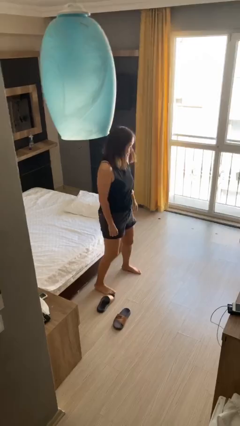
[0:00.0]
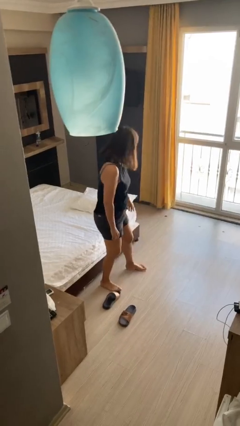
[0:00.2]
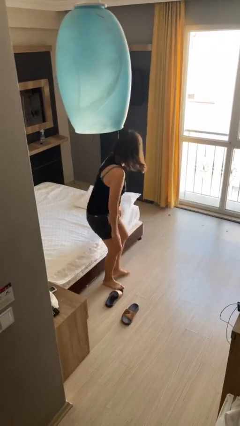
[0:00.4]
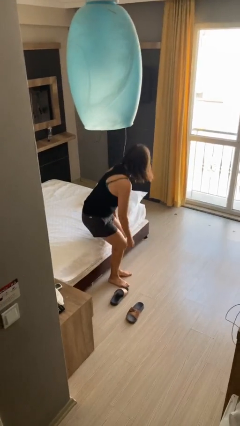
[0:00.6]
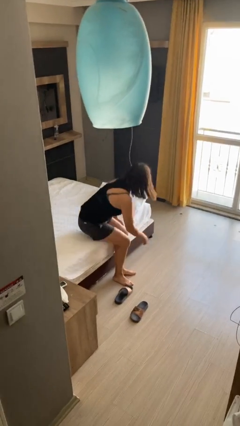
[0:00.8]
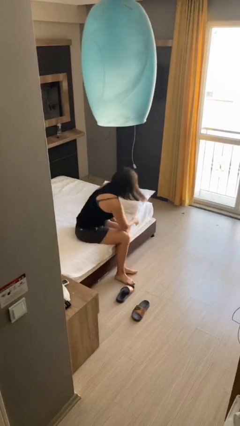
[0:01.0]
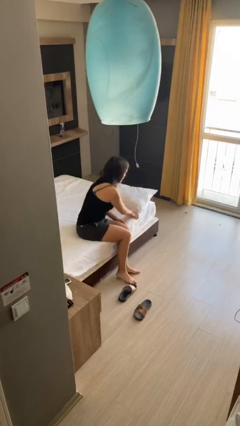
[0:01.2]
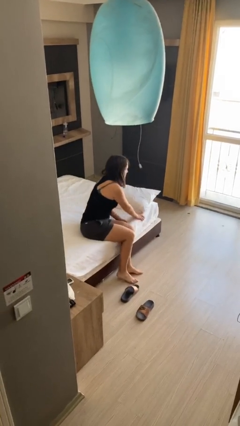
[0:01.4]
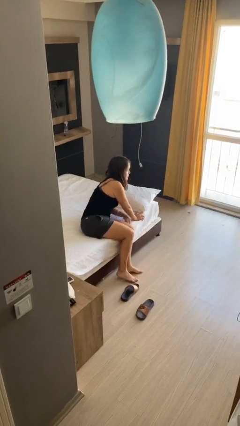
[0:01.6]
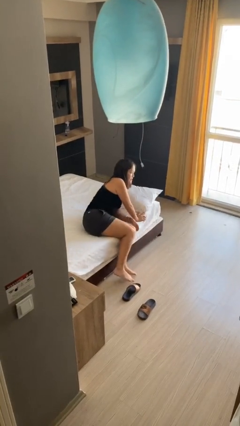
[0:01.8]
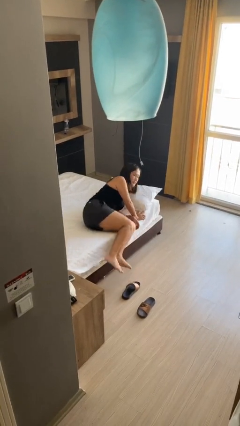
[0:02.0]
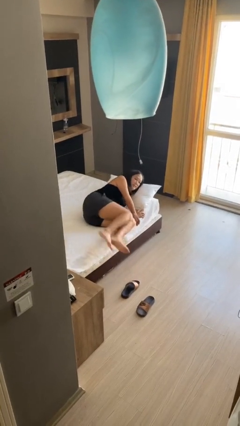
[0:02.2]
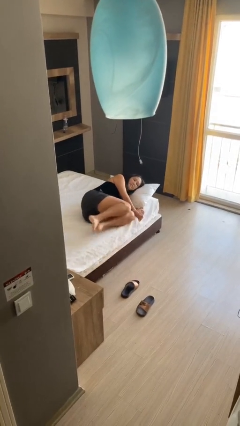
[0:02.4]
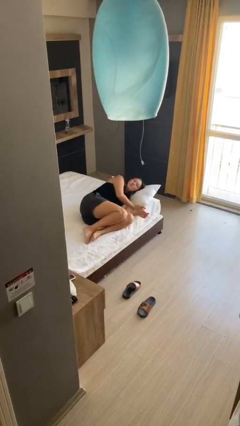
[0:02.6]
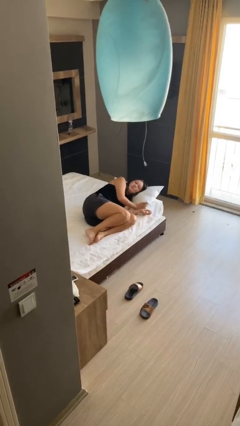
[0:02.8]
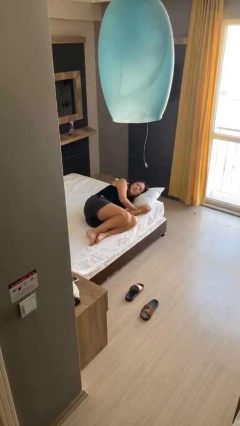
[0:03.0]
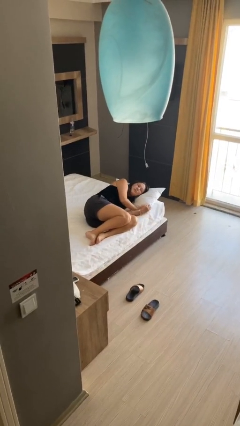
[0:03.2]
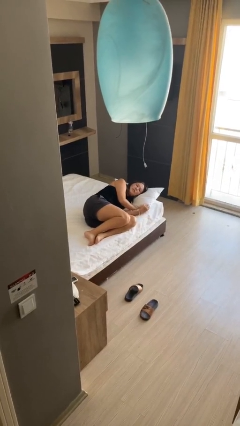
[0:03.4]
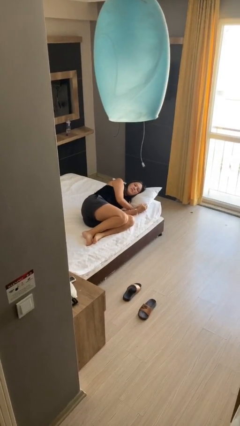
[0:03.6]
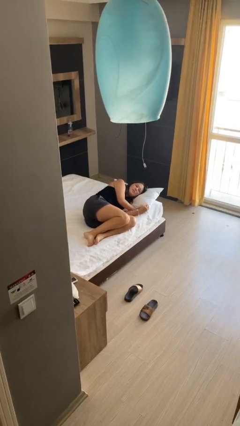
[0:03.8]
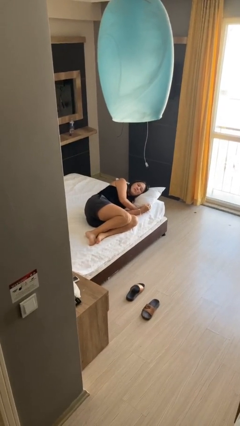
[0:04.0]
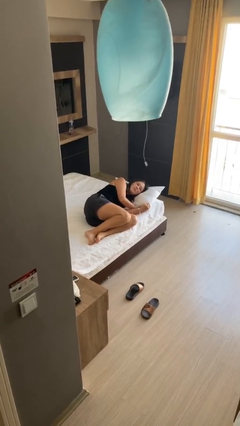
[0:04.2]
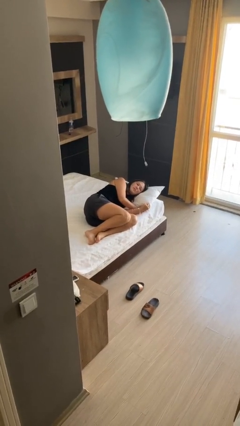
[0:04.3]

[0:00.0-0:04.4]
person lies down on bed

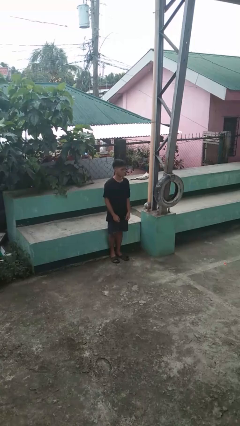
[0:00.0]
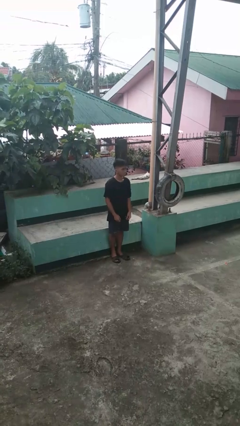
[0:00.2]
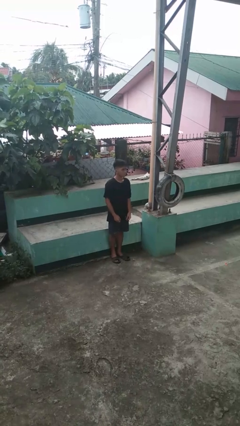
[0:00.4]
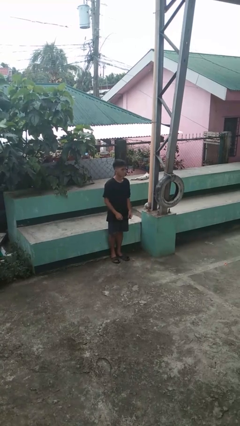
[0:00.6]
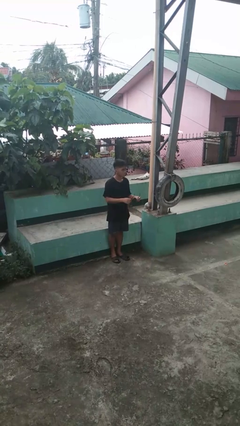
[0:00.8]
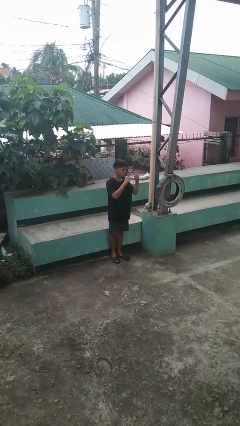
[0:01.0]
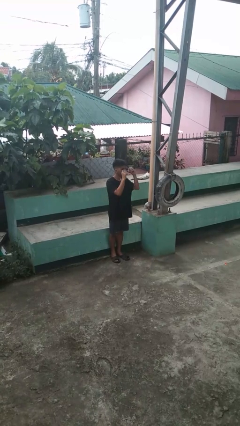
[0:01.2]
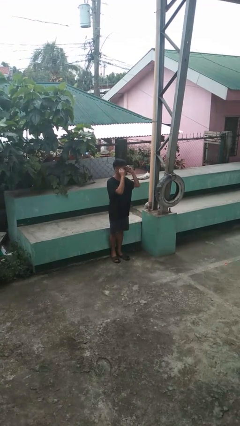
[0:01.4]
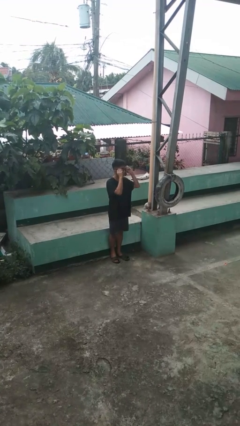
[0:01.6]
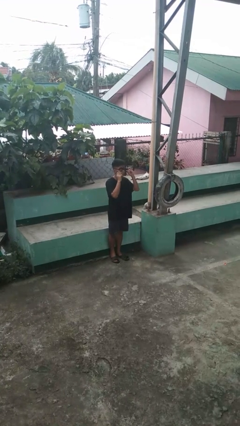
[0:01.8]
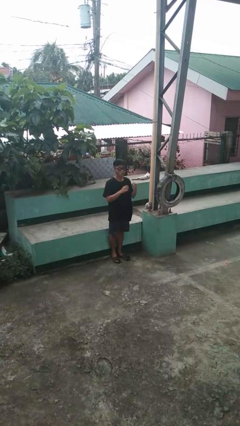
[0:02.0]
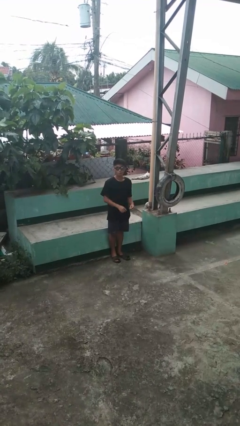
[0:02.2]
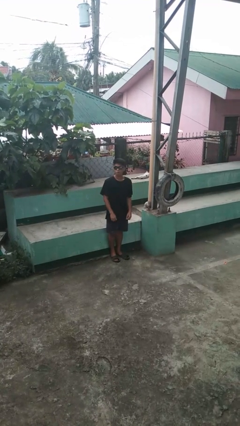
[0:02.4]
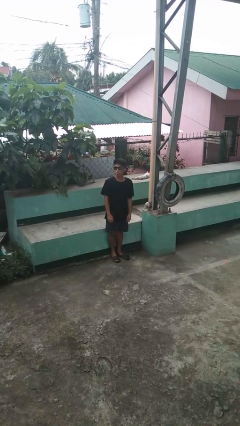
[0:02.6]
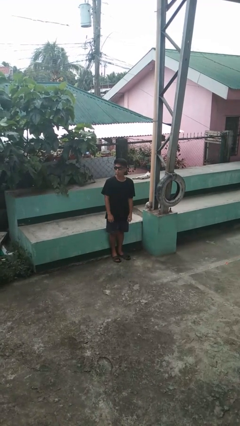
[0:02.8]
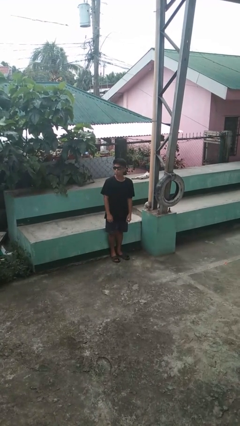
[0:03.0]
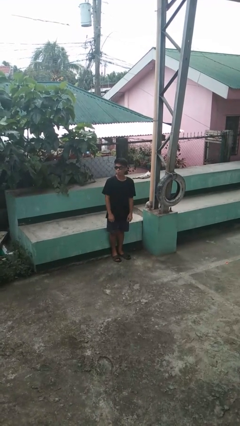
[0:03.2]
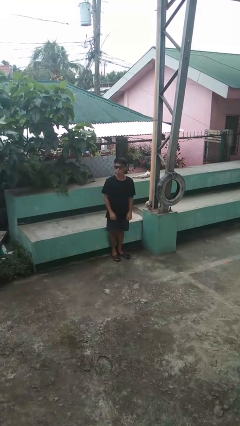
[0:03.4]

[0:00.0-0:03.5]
person puts on sunglasses

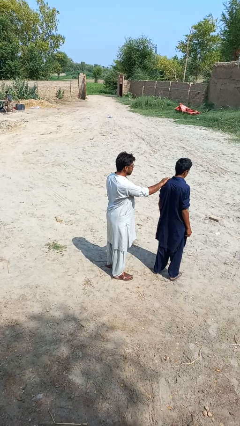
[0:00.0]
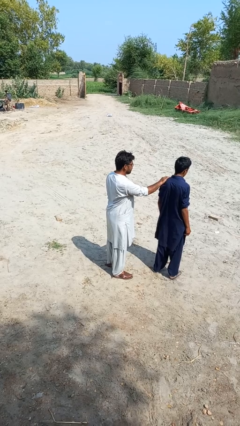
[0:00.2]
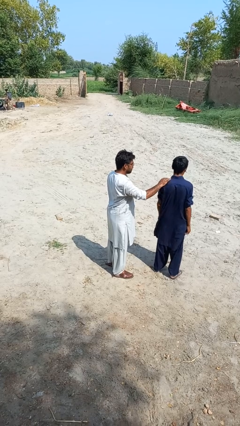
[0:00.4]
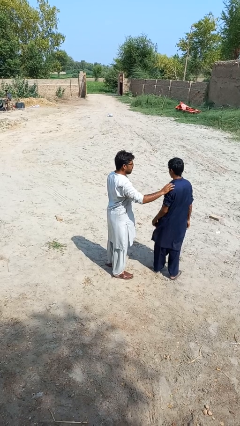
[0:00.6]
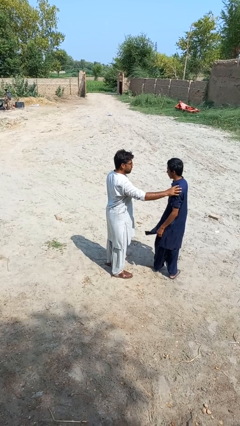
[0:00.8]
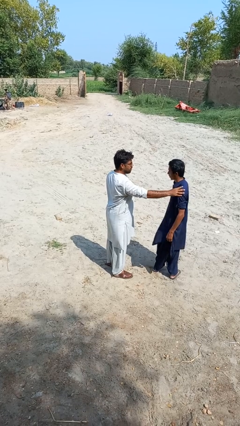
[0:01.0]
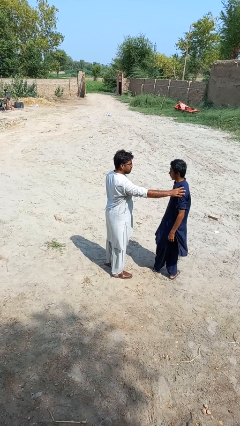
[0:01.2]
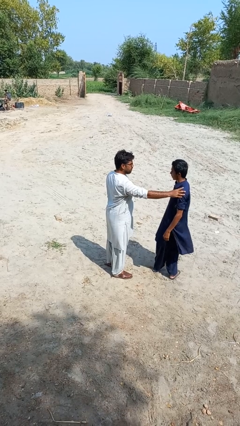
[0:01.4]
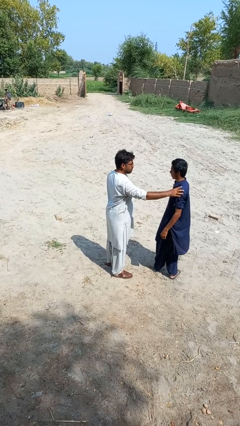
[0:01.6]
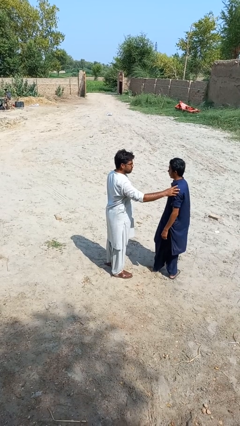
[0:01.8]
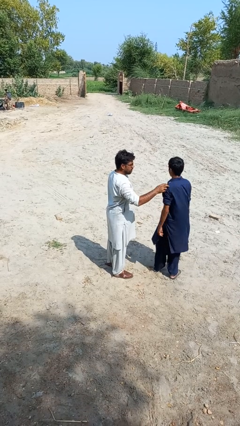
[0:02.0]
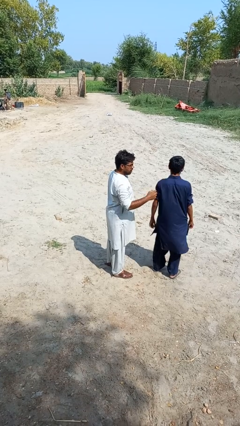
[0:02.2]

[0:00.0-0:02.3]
person spins person around

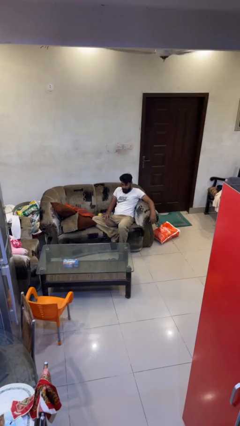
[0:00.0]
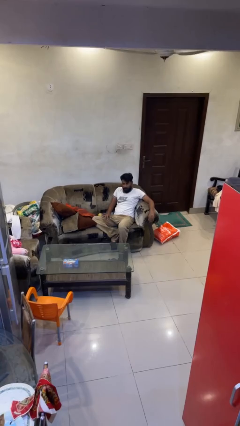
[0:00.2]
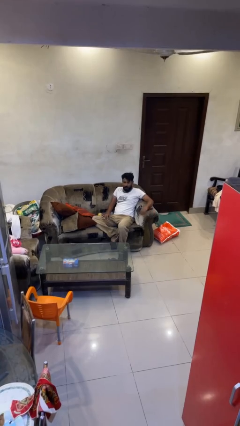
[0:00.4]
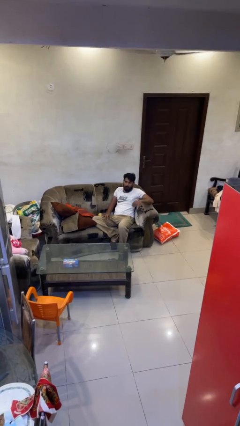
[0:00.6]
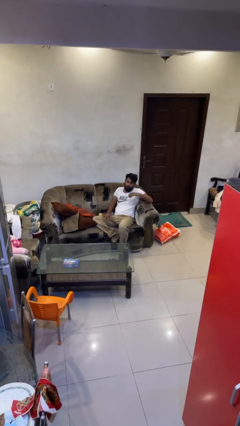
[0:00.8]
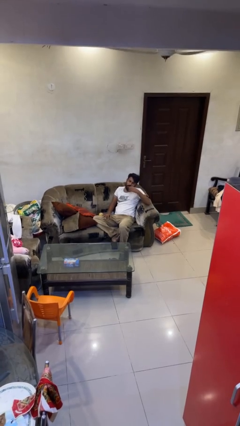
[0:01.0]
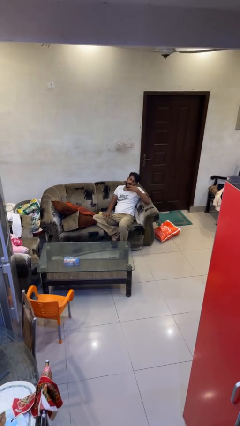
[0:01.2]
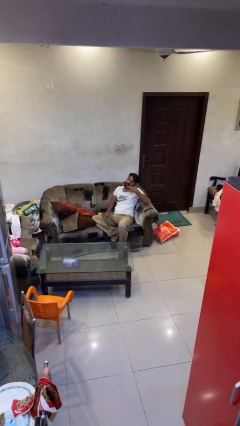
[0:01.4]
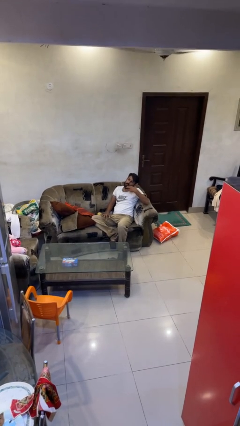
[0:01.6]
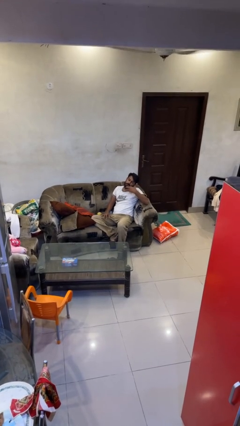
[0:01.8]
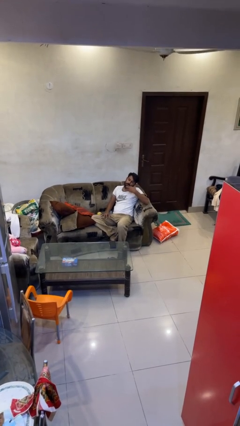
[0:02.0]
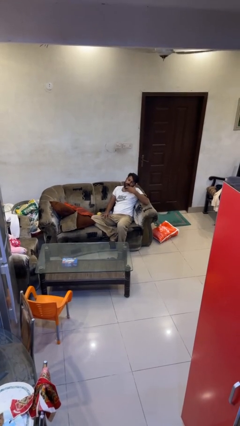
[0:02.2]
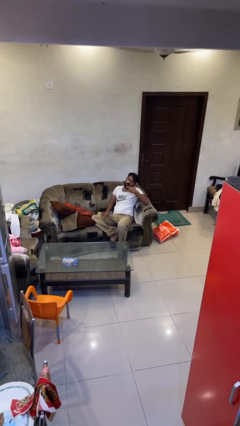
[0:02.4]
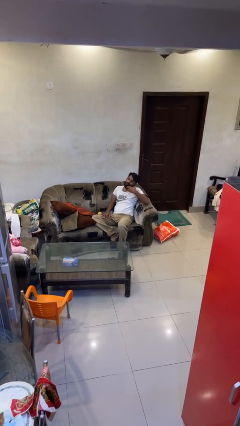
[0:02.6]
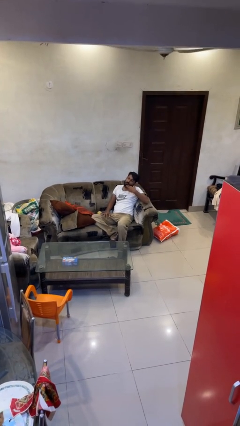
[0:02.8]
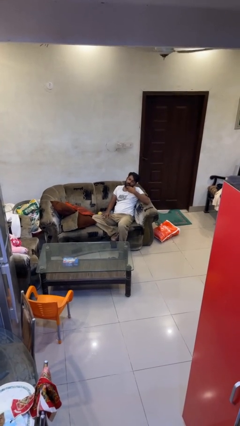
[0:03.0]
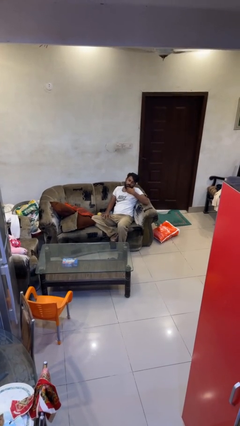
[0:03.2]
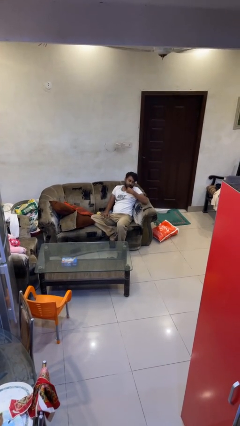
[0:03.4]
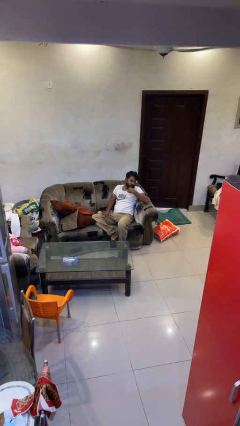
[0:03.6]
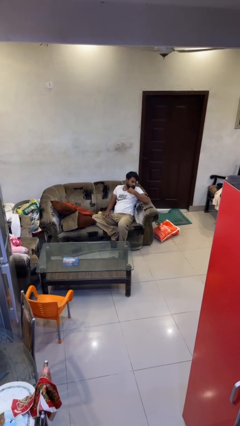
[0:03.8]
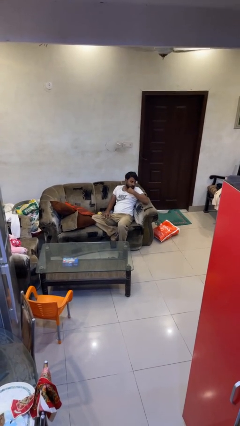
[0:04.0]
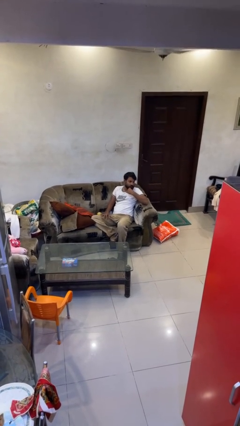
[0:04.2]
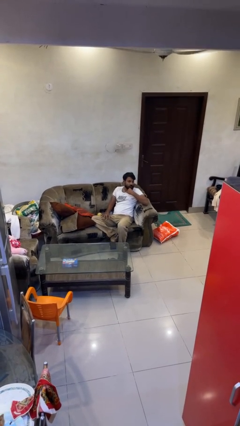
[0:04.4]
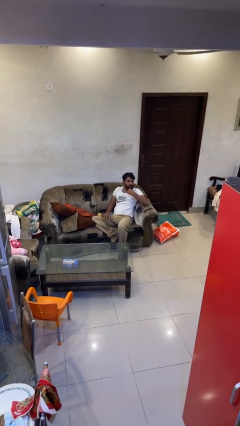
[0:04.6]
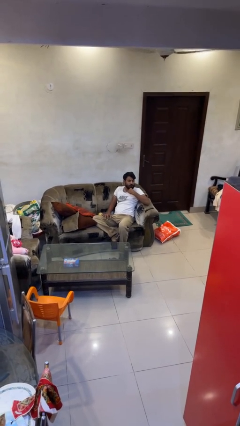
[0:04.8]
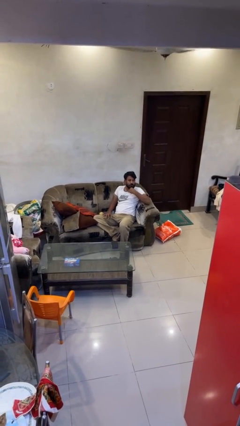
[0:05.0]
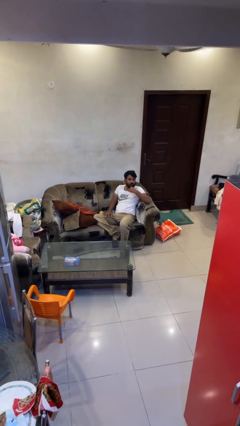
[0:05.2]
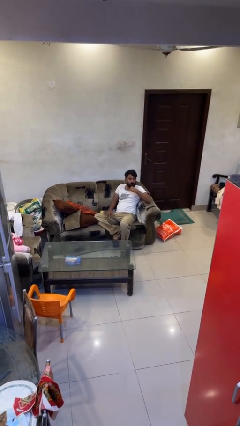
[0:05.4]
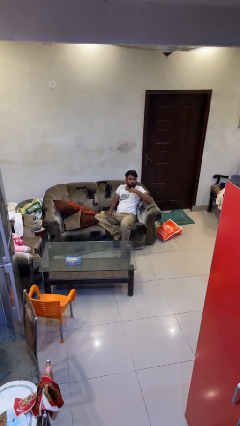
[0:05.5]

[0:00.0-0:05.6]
person strokes chin

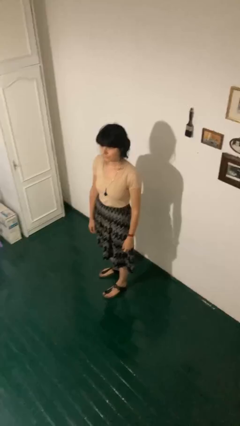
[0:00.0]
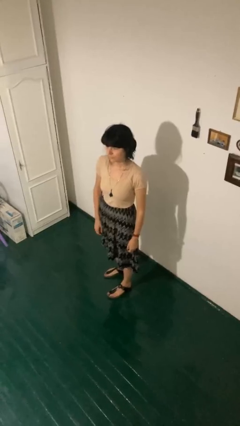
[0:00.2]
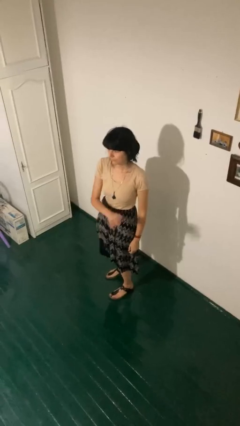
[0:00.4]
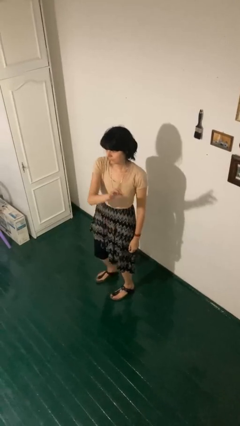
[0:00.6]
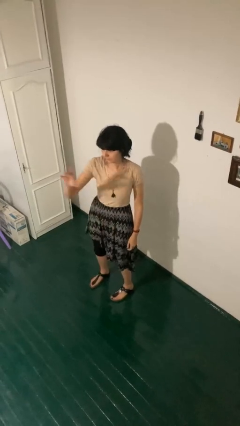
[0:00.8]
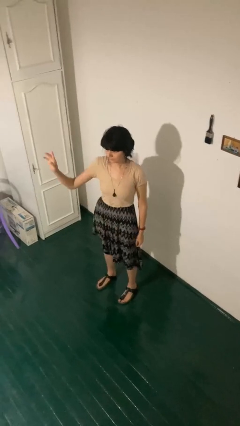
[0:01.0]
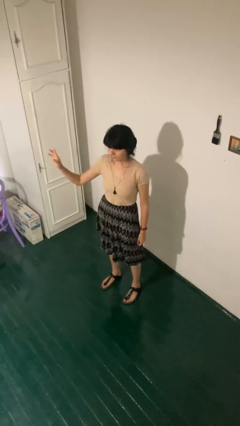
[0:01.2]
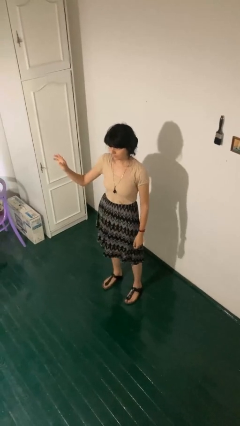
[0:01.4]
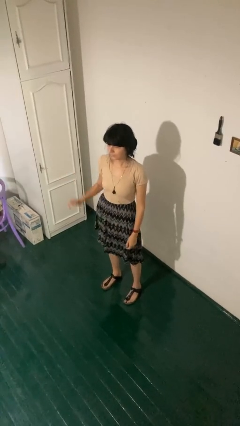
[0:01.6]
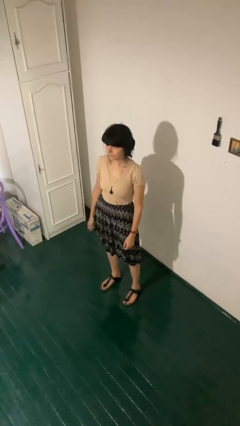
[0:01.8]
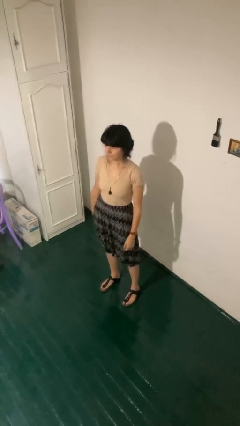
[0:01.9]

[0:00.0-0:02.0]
person gestures swipe right
